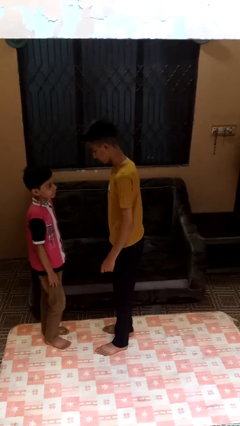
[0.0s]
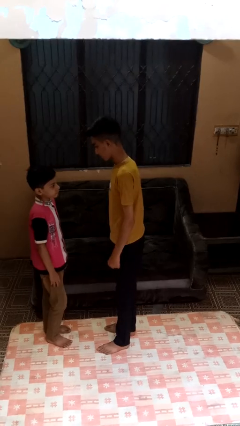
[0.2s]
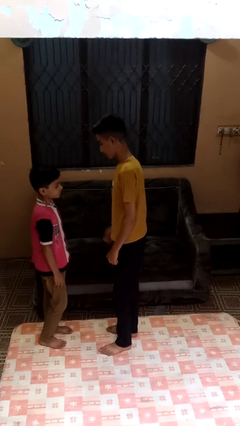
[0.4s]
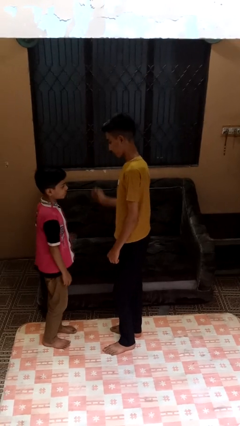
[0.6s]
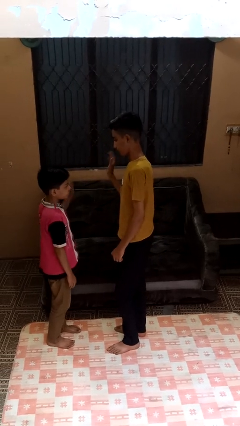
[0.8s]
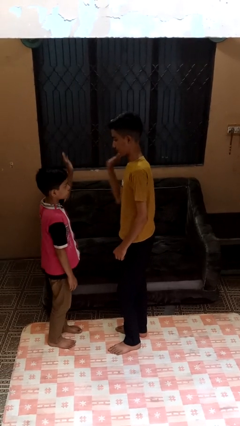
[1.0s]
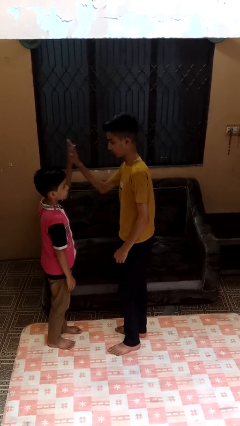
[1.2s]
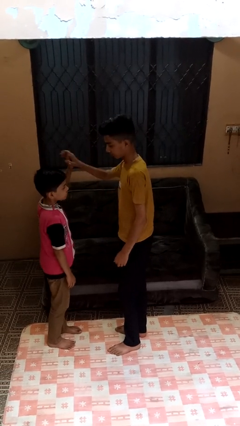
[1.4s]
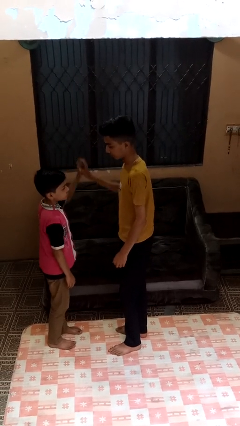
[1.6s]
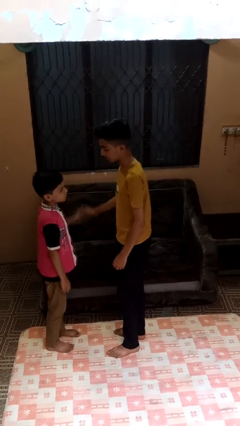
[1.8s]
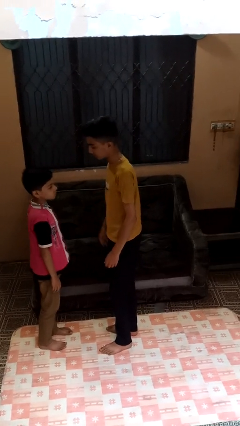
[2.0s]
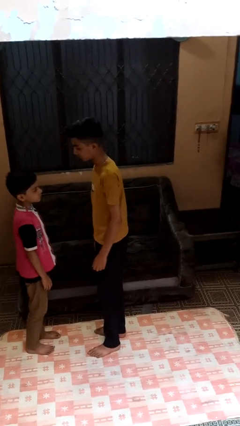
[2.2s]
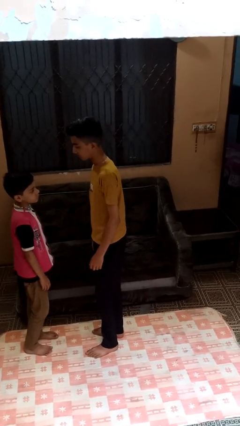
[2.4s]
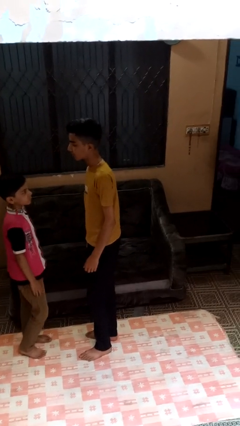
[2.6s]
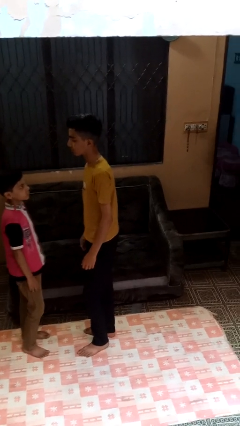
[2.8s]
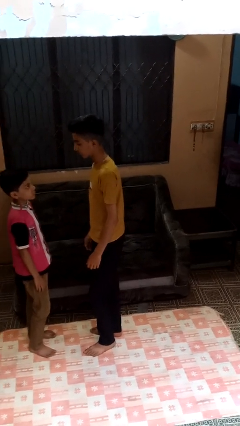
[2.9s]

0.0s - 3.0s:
person highfives hand

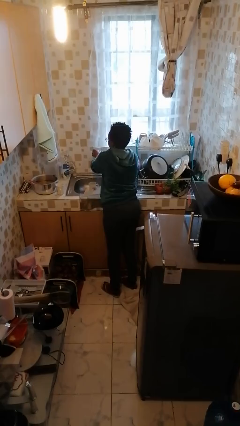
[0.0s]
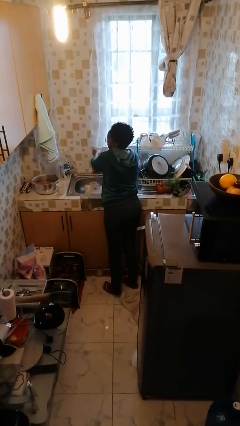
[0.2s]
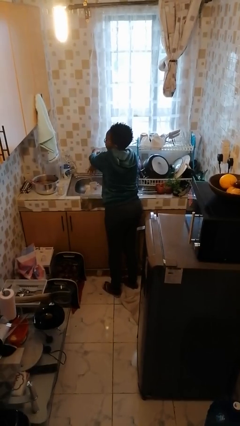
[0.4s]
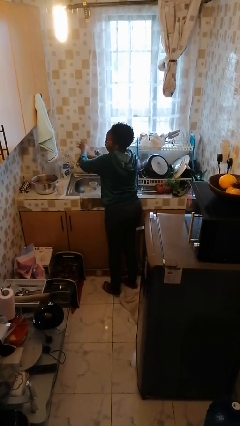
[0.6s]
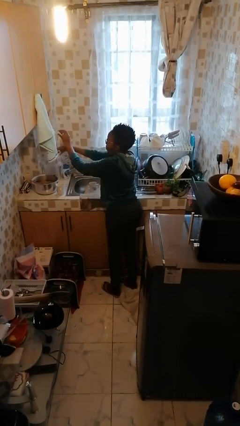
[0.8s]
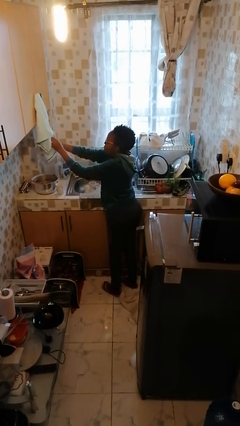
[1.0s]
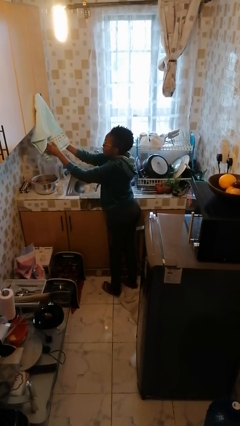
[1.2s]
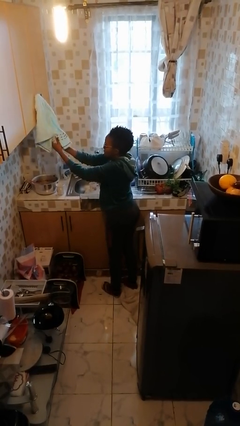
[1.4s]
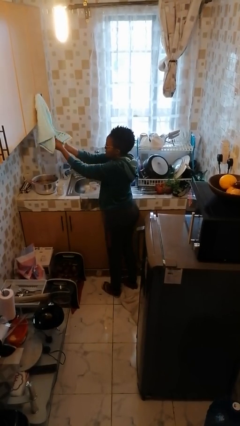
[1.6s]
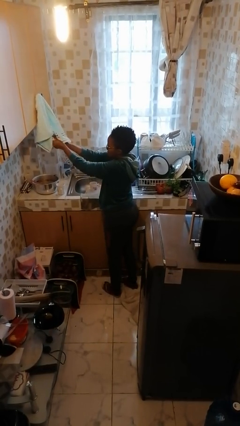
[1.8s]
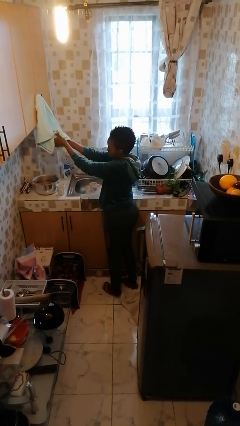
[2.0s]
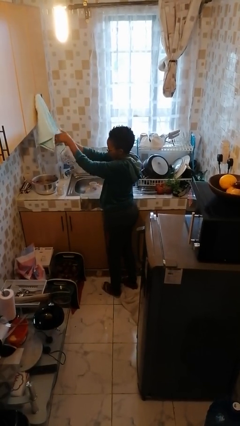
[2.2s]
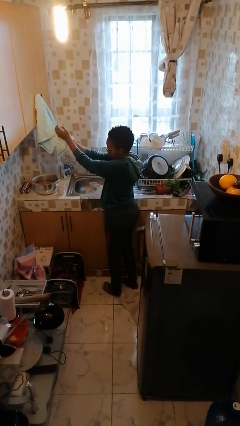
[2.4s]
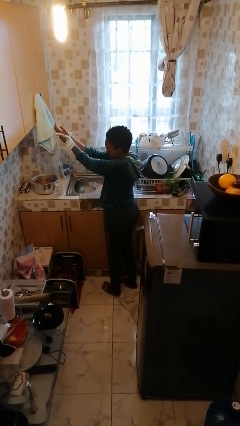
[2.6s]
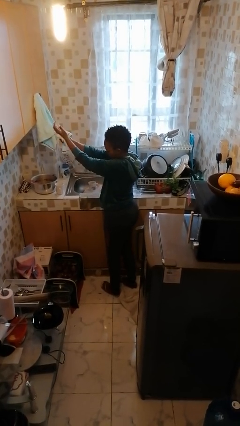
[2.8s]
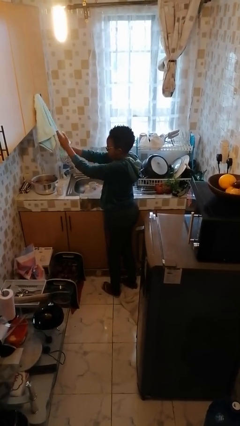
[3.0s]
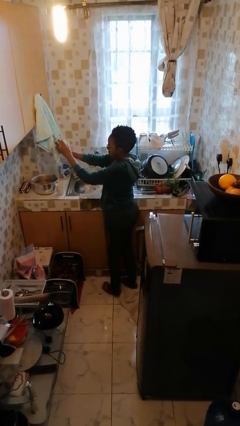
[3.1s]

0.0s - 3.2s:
person dries hands with towel

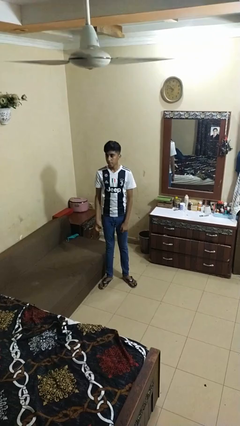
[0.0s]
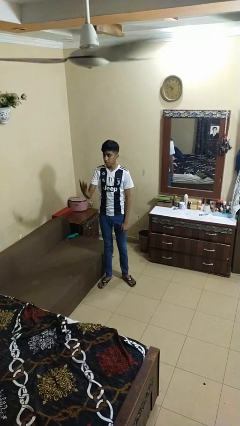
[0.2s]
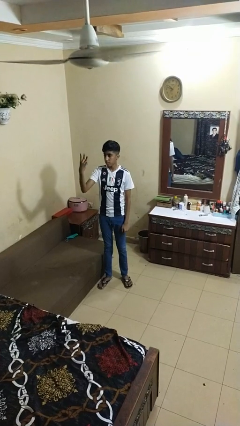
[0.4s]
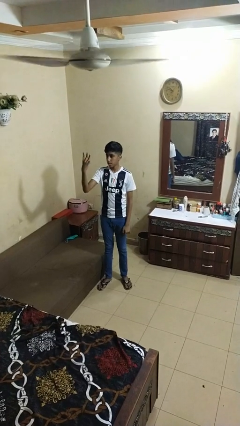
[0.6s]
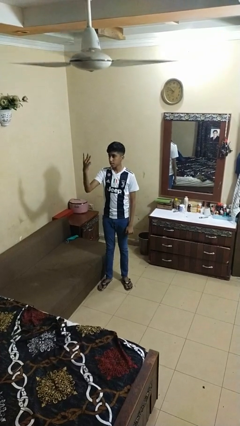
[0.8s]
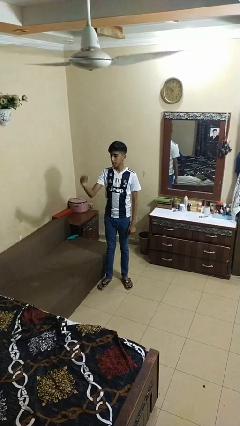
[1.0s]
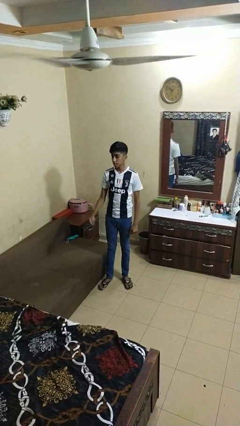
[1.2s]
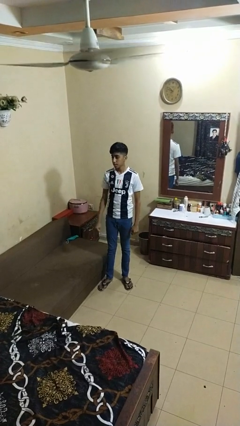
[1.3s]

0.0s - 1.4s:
person gestures number three

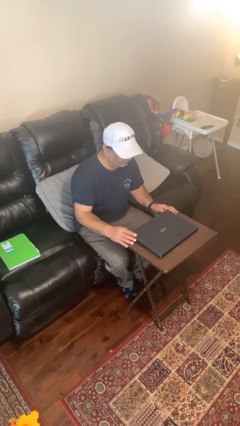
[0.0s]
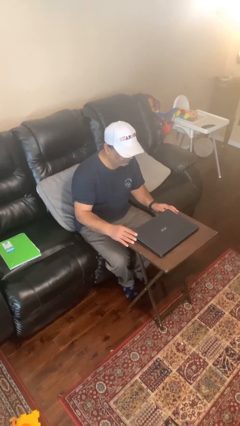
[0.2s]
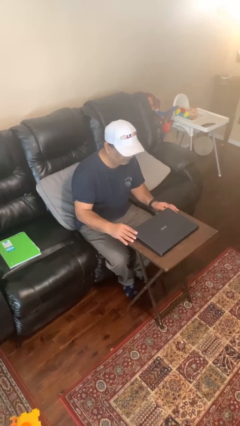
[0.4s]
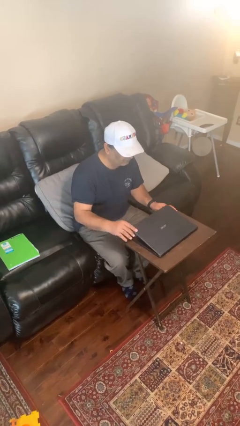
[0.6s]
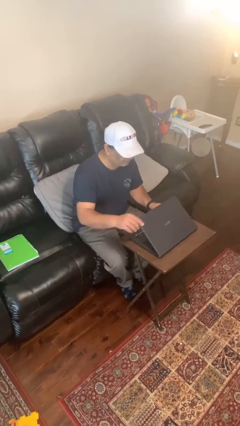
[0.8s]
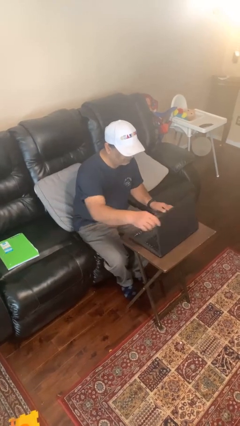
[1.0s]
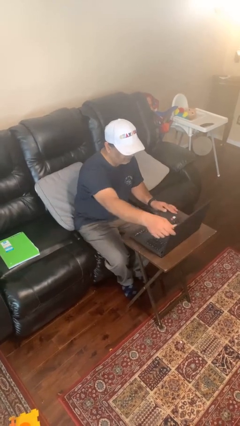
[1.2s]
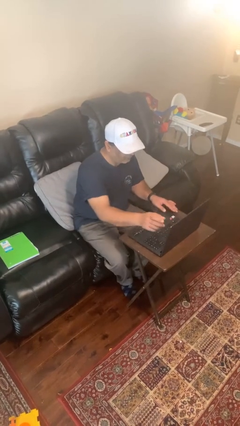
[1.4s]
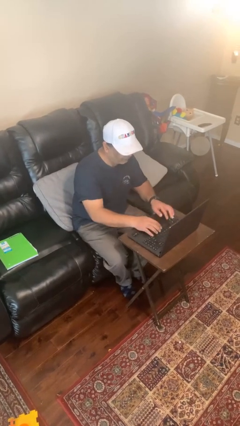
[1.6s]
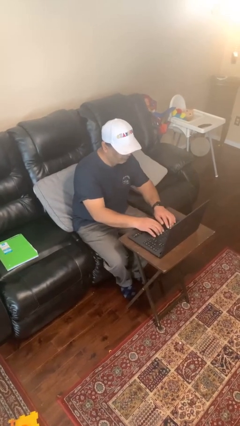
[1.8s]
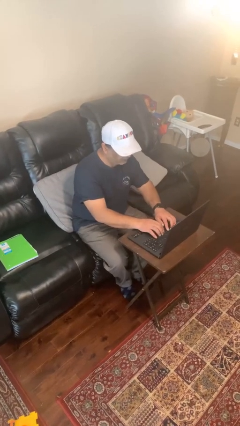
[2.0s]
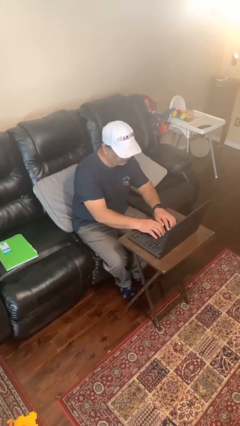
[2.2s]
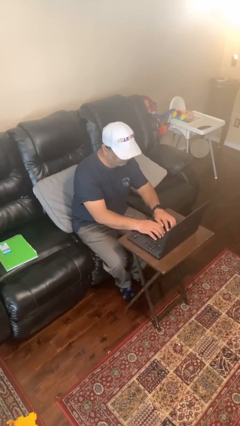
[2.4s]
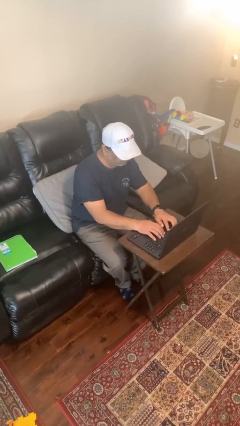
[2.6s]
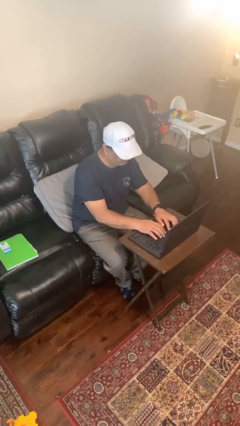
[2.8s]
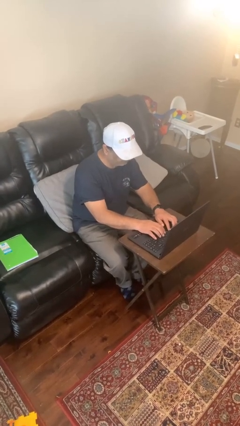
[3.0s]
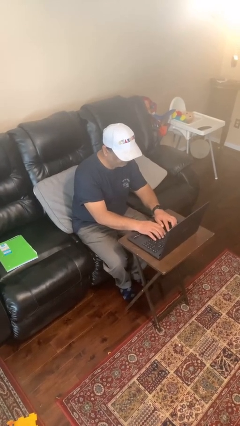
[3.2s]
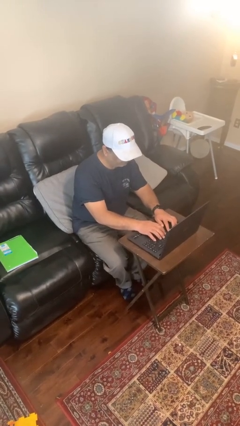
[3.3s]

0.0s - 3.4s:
person interacts with laptop

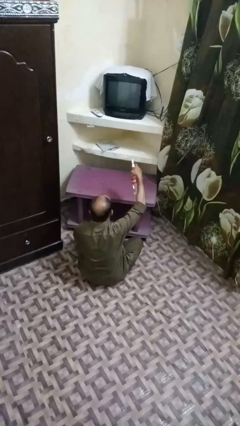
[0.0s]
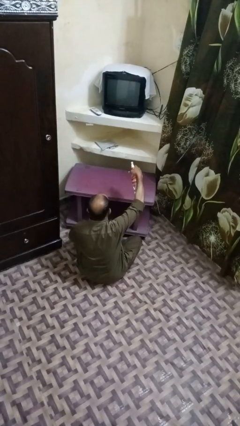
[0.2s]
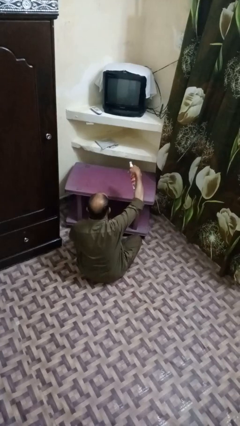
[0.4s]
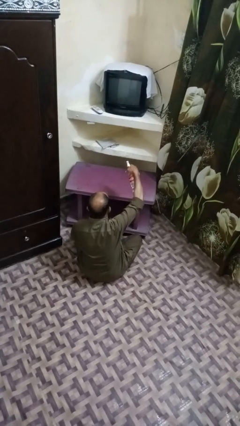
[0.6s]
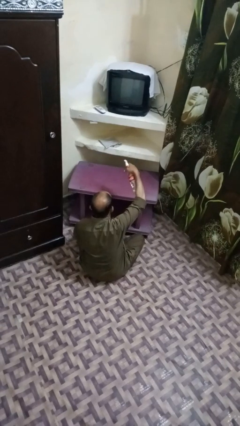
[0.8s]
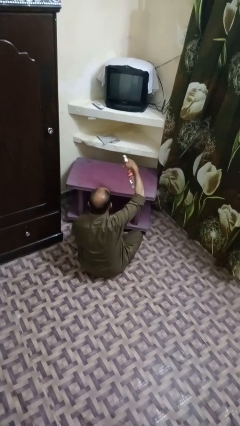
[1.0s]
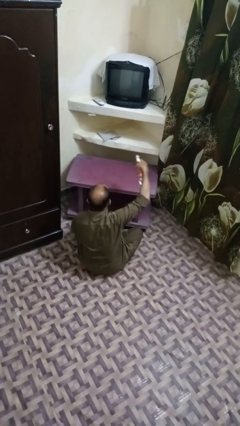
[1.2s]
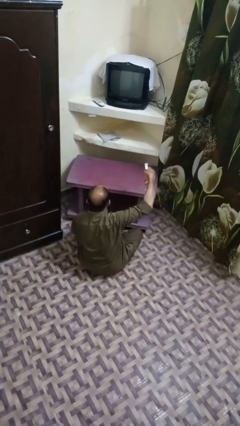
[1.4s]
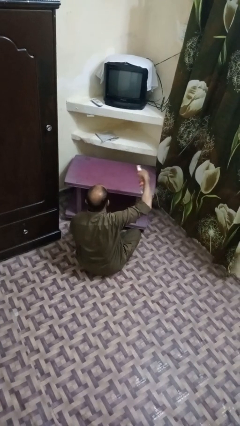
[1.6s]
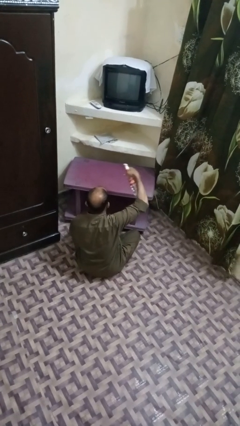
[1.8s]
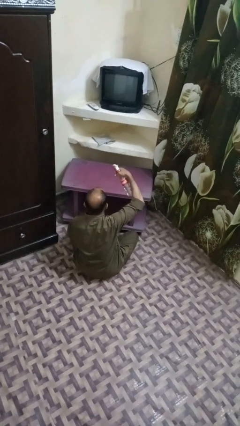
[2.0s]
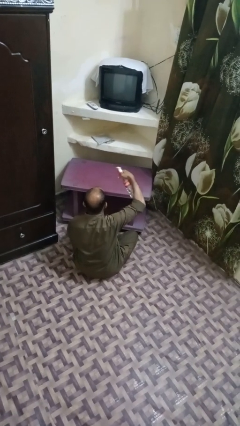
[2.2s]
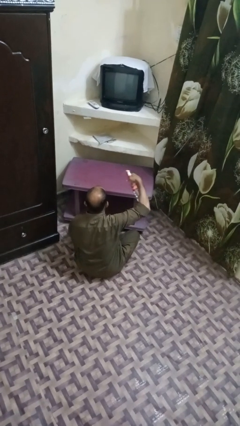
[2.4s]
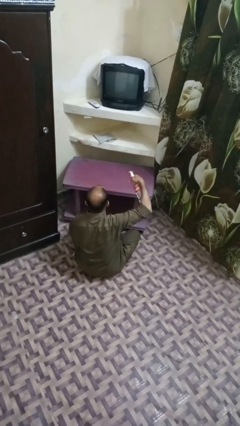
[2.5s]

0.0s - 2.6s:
person sprays from bottle

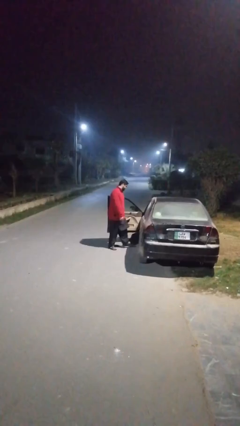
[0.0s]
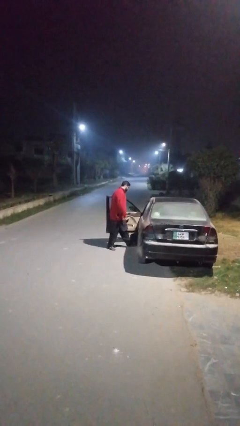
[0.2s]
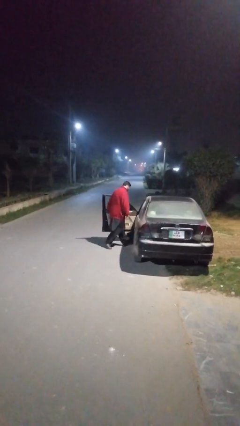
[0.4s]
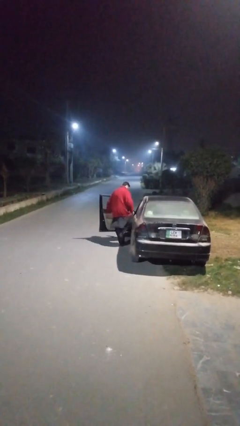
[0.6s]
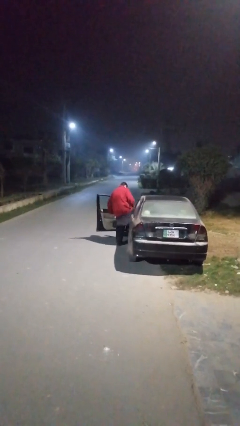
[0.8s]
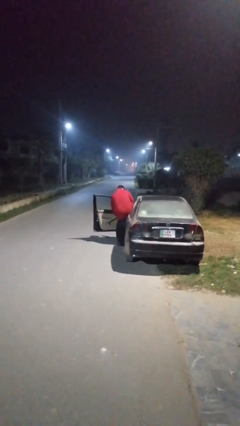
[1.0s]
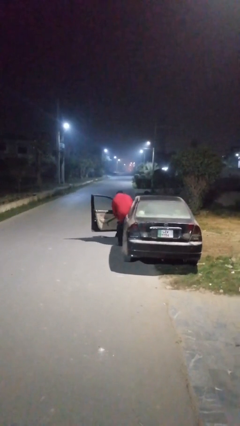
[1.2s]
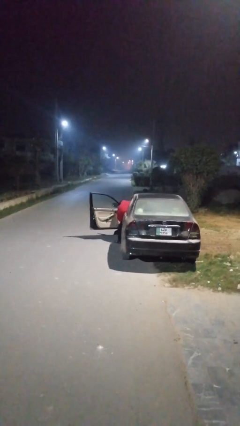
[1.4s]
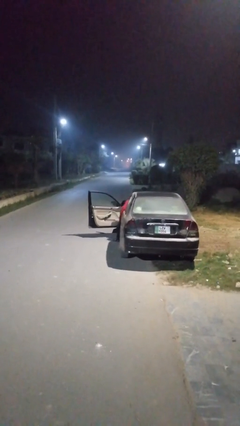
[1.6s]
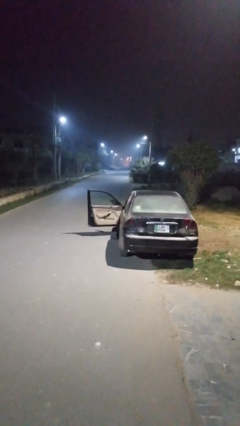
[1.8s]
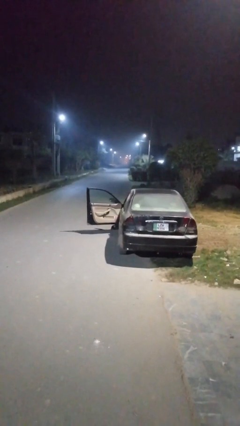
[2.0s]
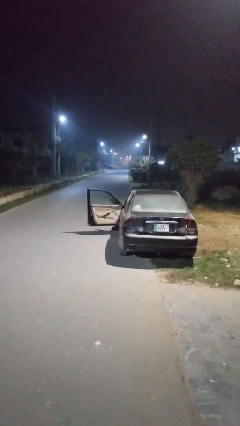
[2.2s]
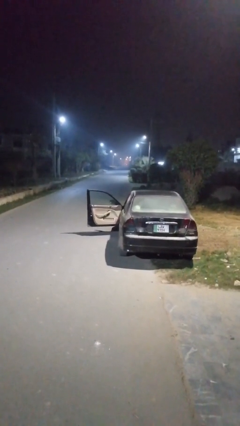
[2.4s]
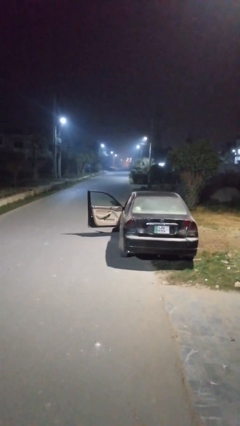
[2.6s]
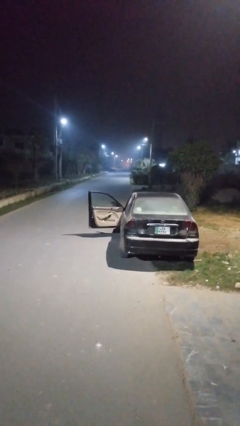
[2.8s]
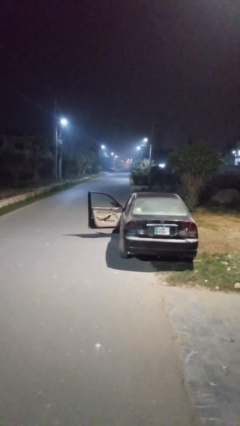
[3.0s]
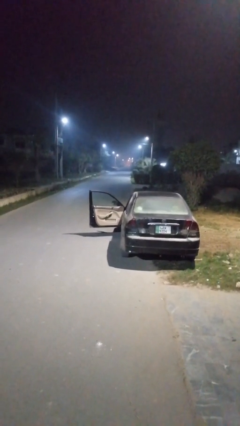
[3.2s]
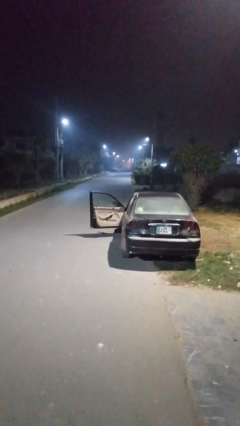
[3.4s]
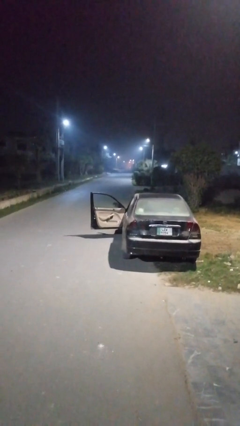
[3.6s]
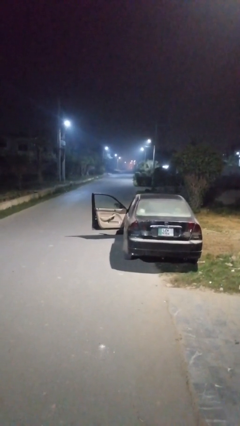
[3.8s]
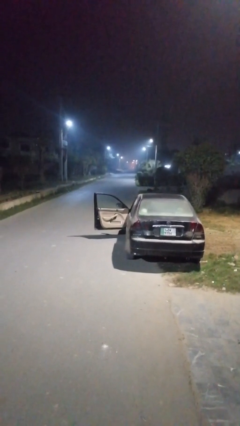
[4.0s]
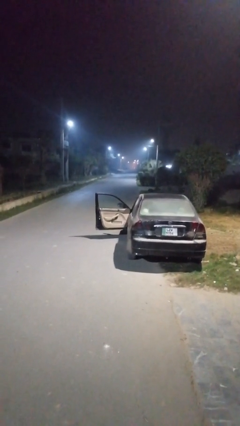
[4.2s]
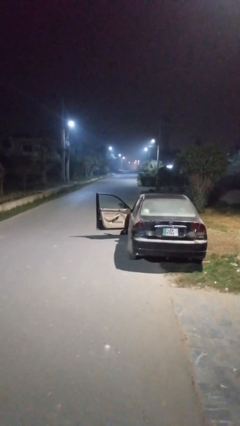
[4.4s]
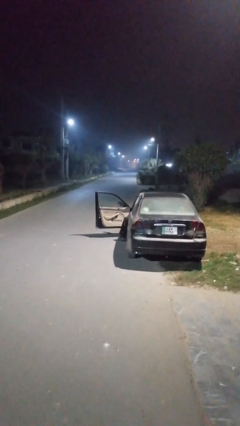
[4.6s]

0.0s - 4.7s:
person enters car
